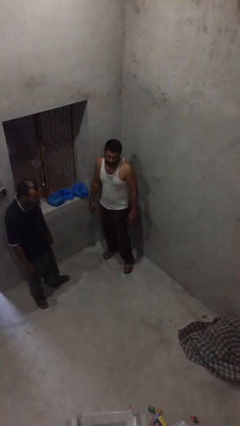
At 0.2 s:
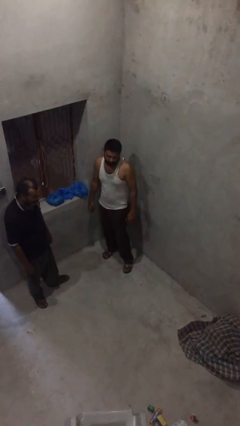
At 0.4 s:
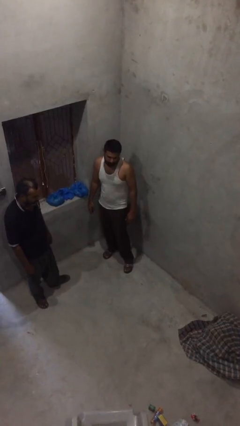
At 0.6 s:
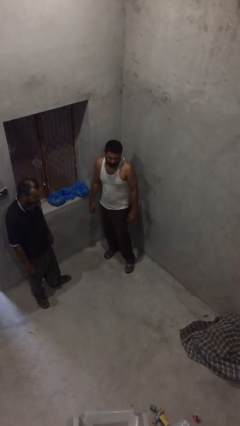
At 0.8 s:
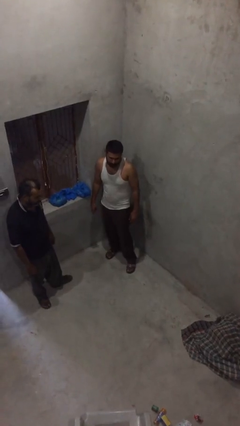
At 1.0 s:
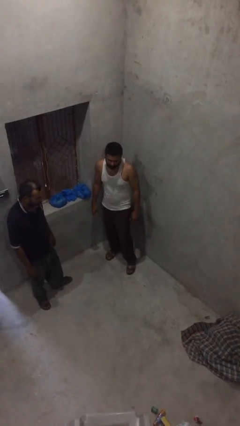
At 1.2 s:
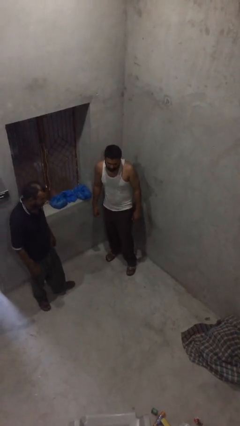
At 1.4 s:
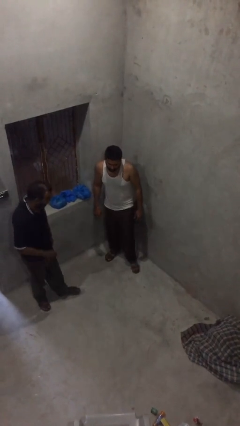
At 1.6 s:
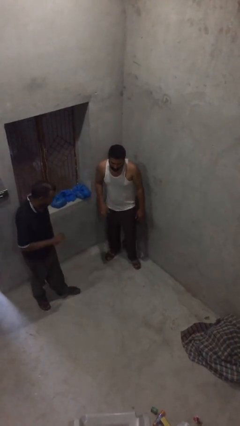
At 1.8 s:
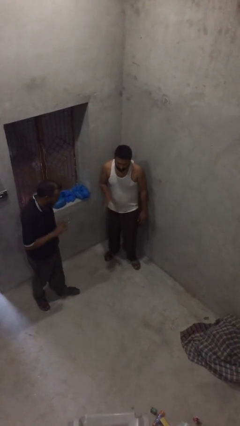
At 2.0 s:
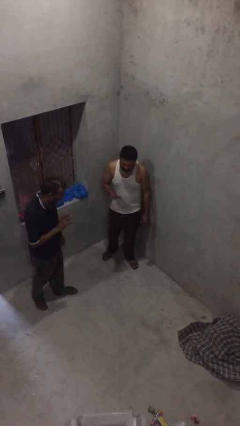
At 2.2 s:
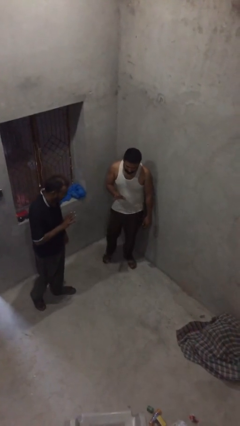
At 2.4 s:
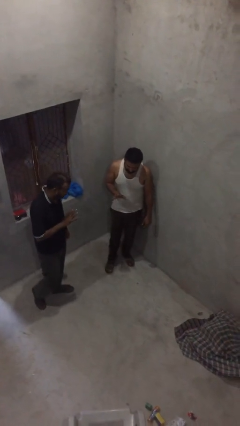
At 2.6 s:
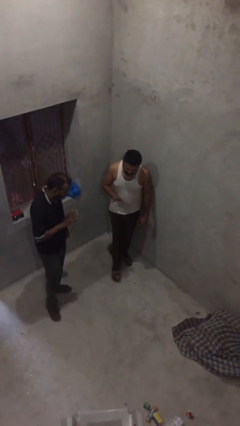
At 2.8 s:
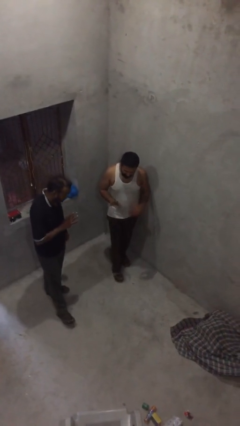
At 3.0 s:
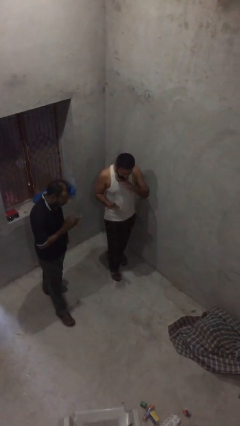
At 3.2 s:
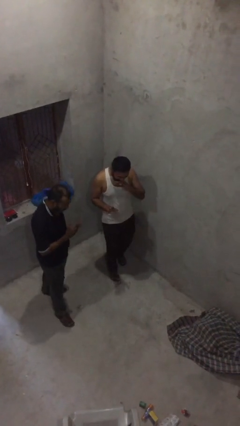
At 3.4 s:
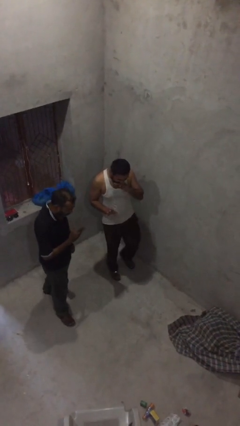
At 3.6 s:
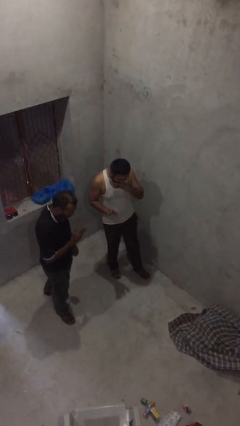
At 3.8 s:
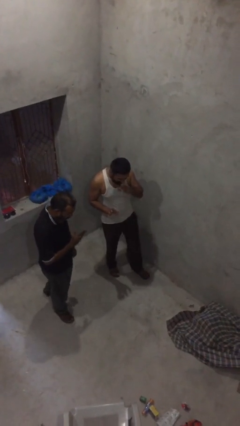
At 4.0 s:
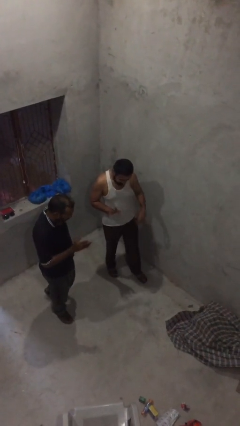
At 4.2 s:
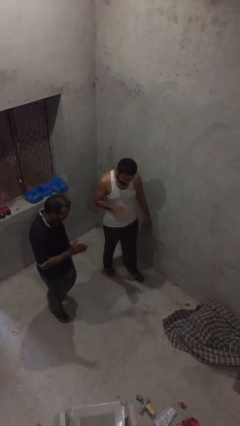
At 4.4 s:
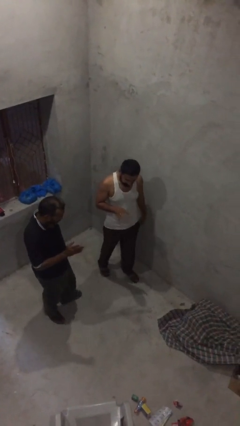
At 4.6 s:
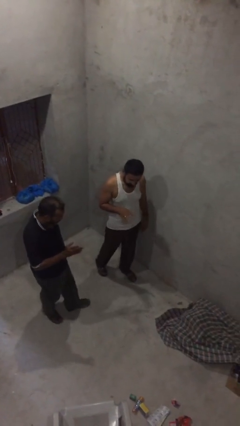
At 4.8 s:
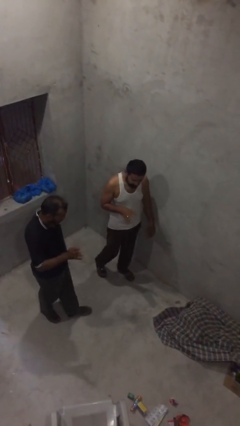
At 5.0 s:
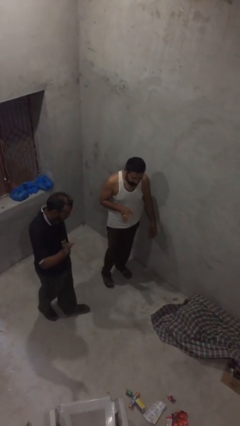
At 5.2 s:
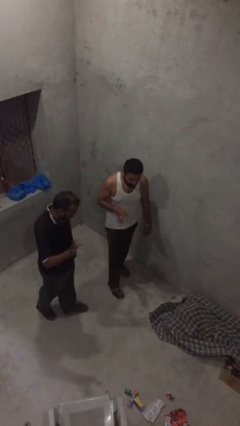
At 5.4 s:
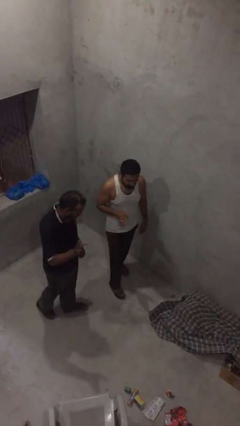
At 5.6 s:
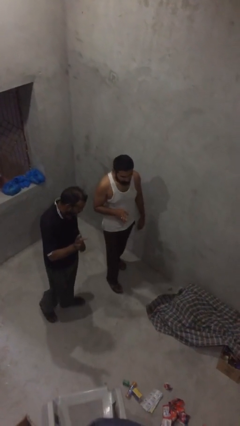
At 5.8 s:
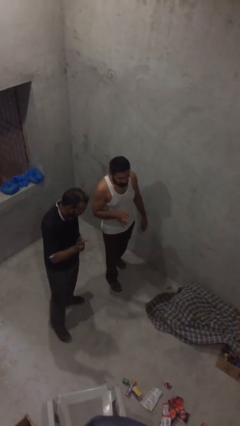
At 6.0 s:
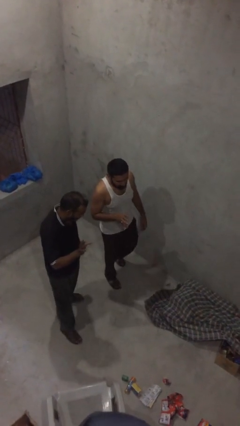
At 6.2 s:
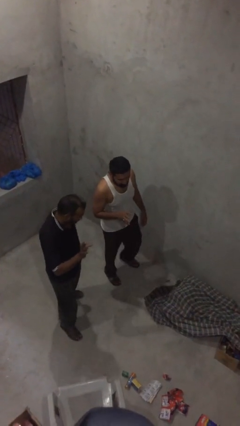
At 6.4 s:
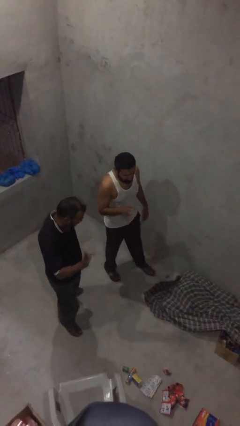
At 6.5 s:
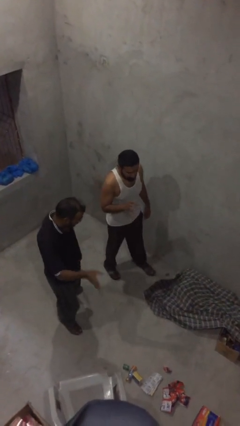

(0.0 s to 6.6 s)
person talks to person

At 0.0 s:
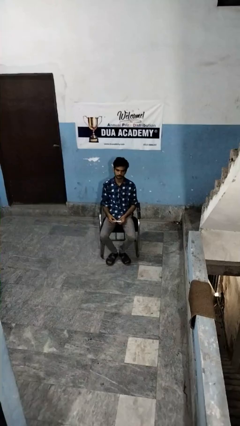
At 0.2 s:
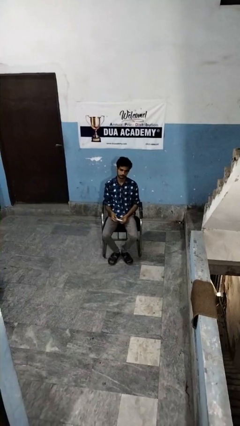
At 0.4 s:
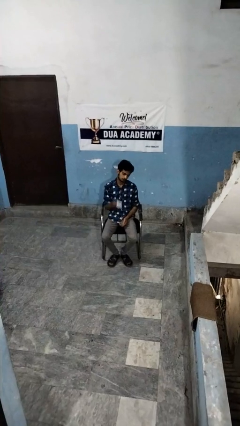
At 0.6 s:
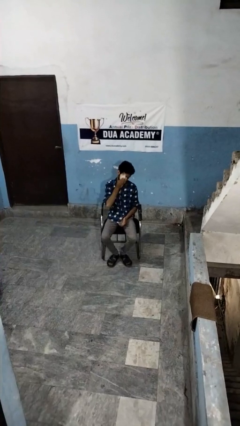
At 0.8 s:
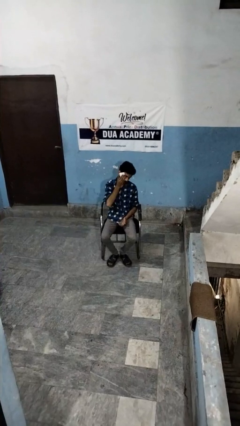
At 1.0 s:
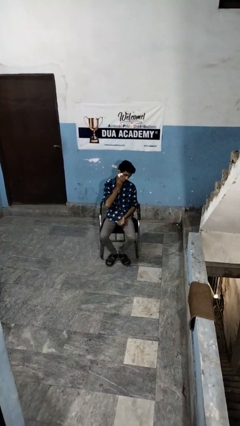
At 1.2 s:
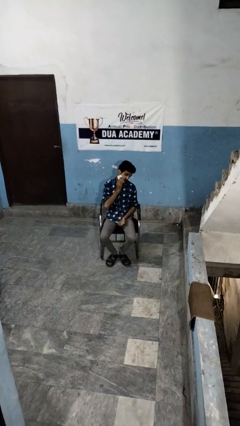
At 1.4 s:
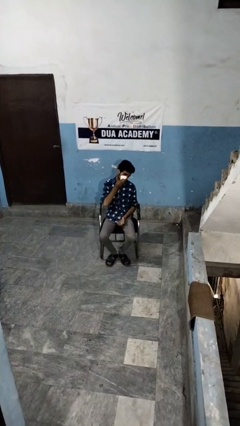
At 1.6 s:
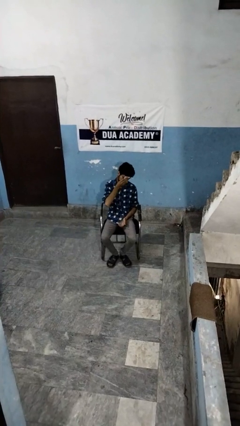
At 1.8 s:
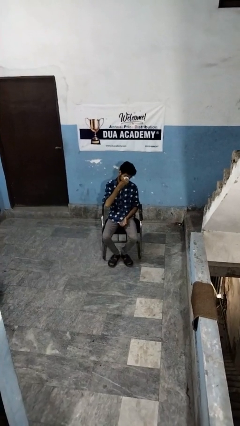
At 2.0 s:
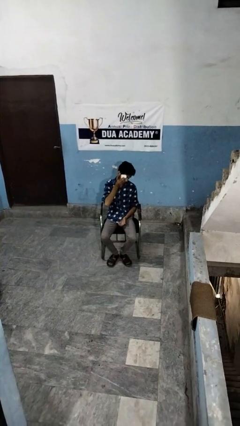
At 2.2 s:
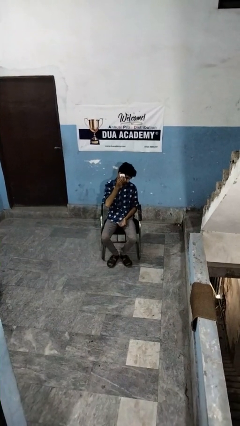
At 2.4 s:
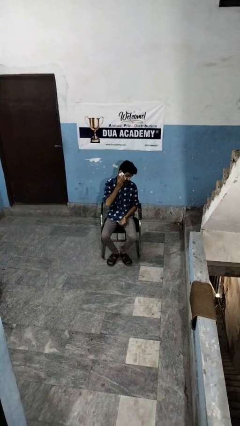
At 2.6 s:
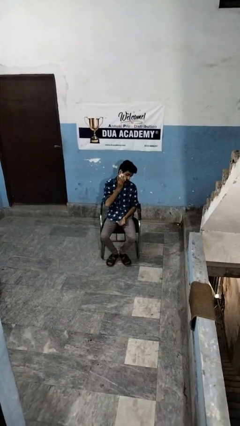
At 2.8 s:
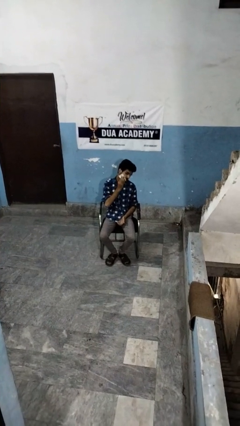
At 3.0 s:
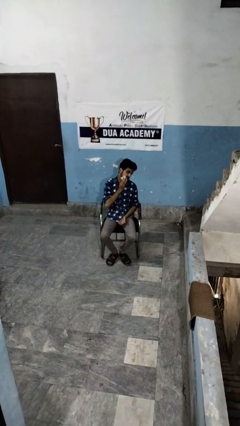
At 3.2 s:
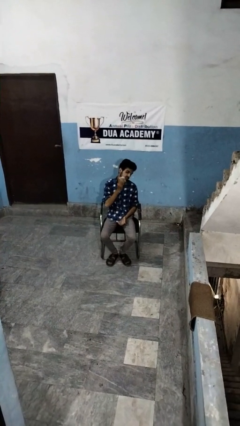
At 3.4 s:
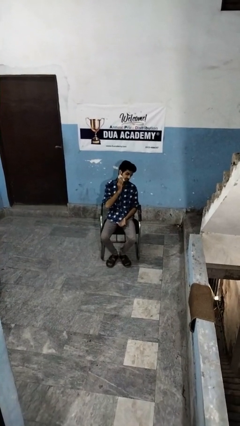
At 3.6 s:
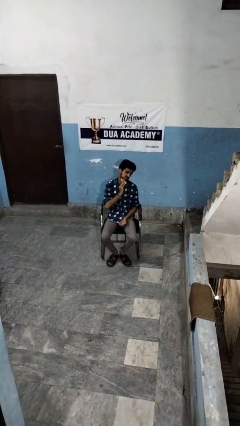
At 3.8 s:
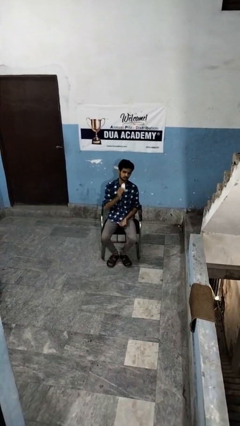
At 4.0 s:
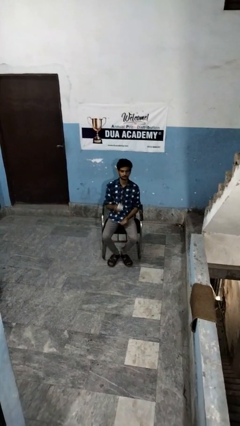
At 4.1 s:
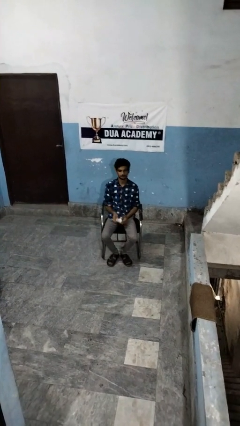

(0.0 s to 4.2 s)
person wipes mouth with napkin

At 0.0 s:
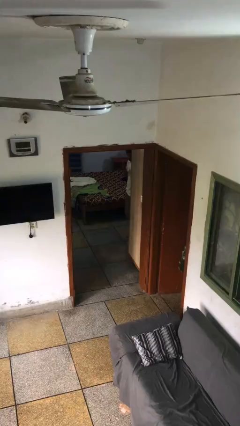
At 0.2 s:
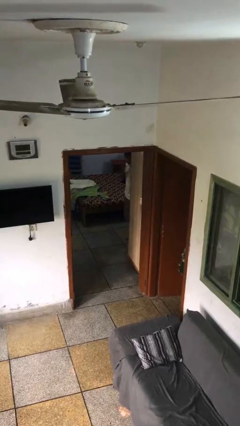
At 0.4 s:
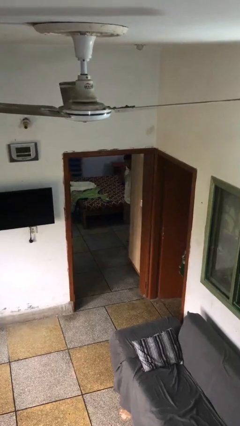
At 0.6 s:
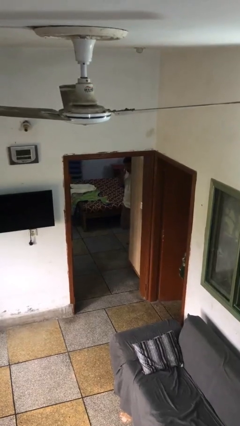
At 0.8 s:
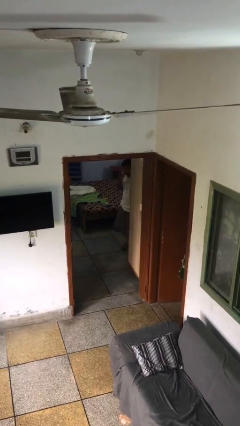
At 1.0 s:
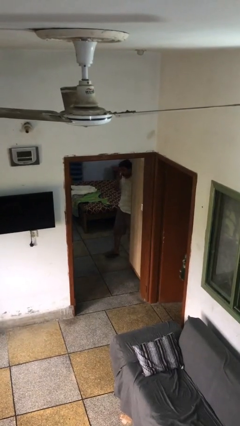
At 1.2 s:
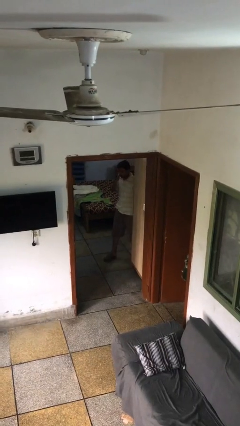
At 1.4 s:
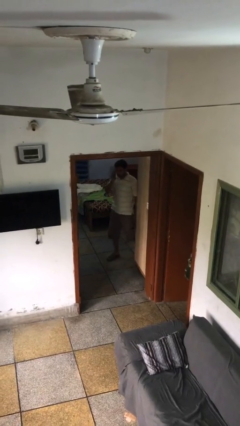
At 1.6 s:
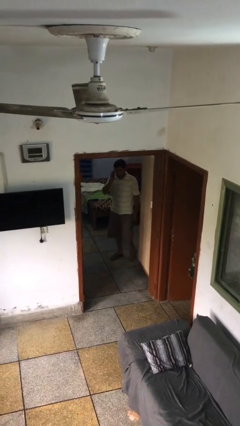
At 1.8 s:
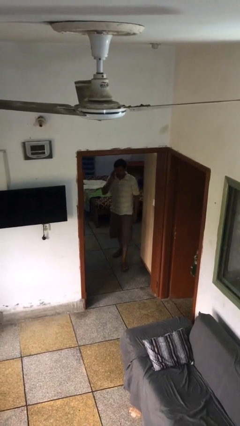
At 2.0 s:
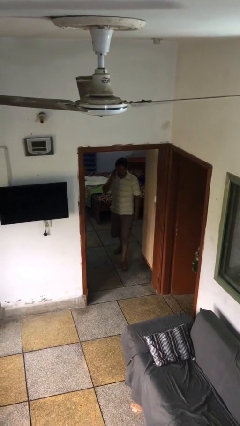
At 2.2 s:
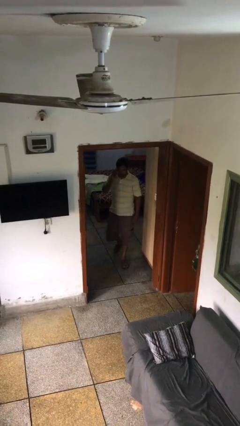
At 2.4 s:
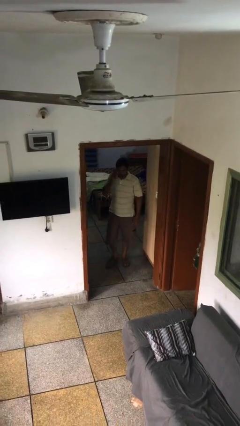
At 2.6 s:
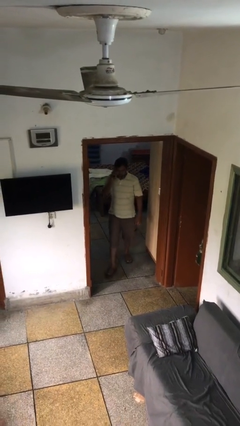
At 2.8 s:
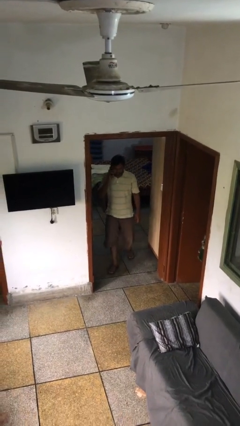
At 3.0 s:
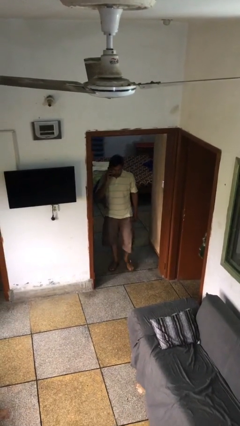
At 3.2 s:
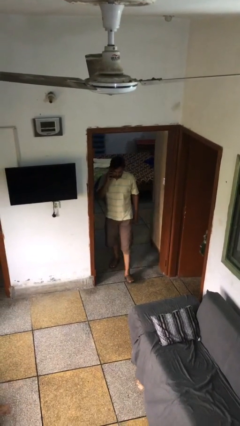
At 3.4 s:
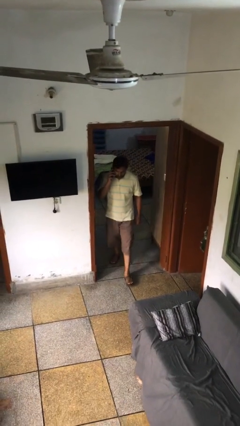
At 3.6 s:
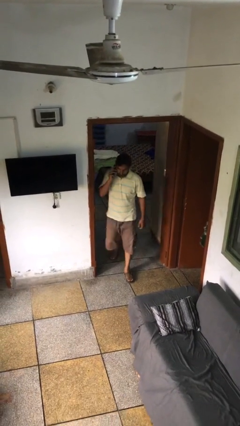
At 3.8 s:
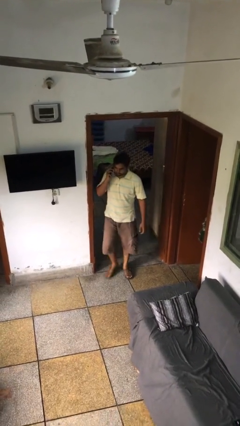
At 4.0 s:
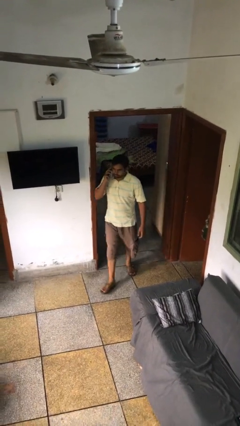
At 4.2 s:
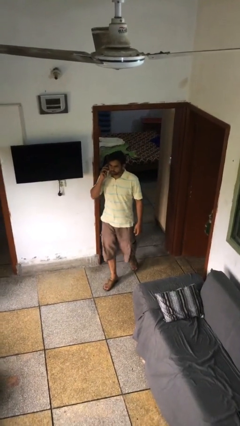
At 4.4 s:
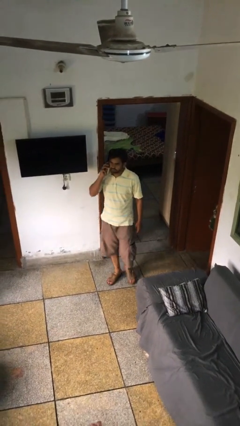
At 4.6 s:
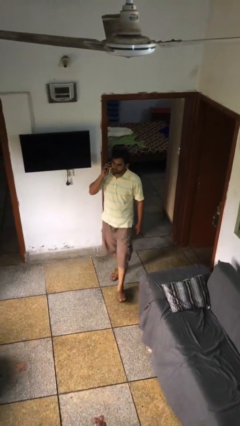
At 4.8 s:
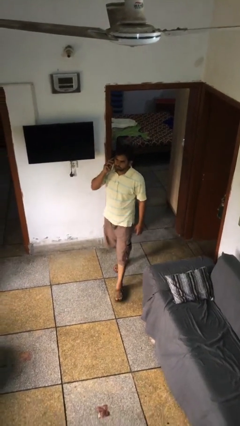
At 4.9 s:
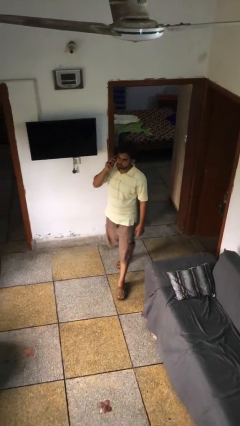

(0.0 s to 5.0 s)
person enters scene through structure

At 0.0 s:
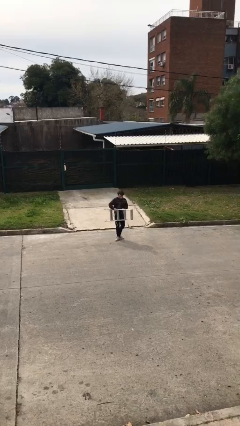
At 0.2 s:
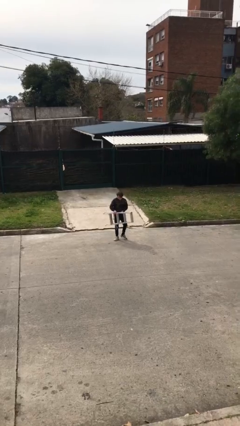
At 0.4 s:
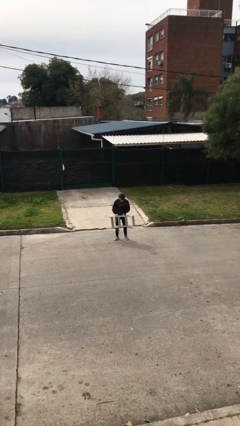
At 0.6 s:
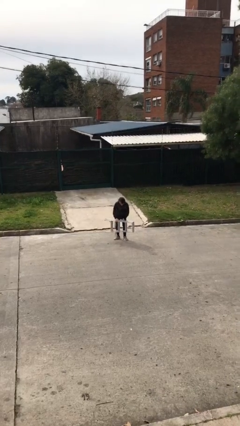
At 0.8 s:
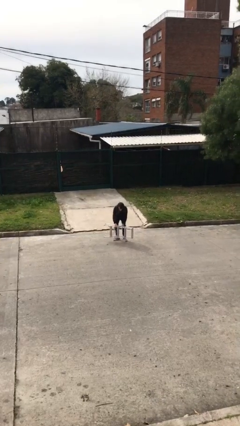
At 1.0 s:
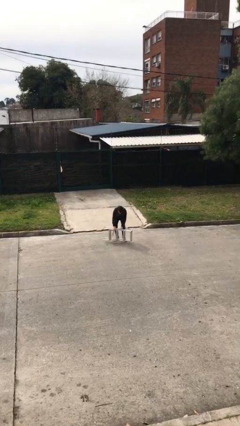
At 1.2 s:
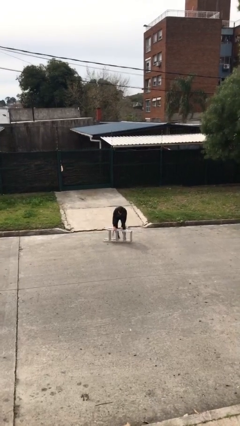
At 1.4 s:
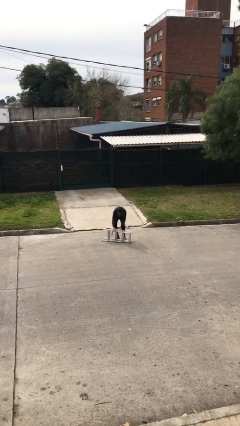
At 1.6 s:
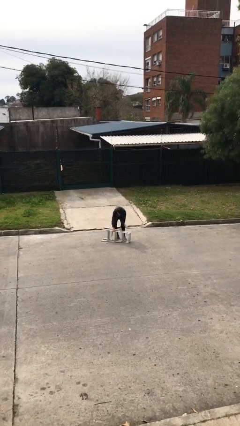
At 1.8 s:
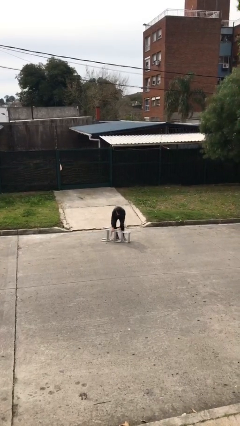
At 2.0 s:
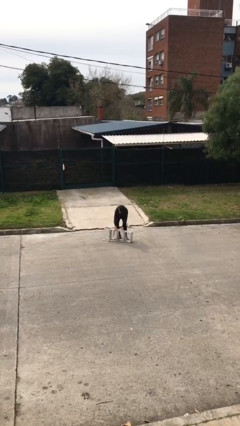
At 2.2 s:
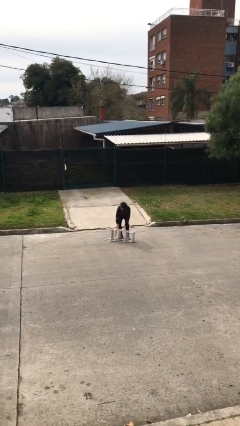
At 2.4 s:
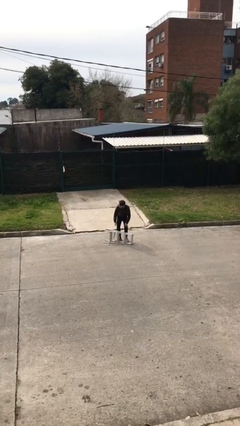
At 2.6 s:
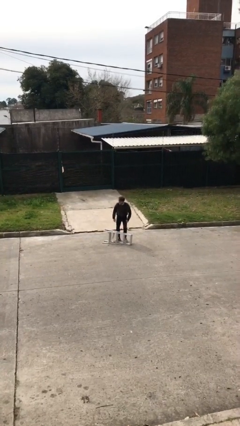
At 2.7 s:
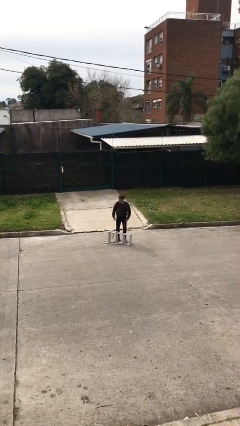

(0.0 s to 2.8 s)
person puts down object on floor
